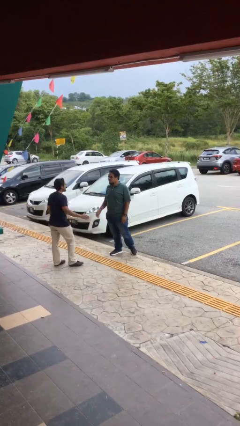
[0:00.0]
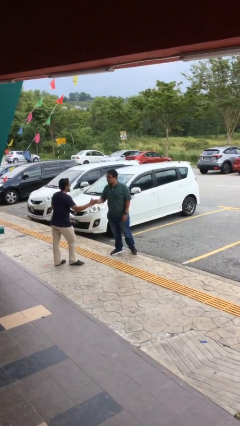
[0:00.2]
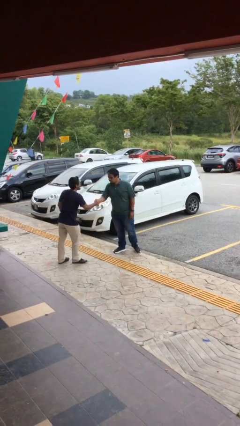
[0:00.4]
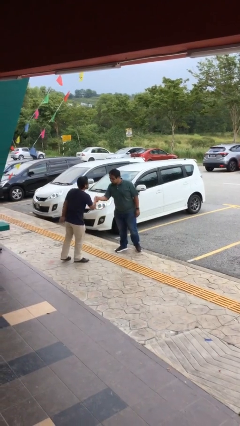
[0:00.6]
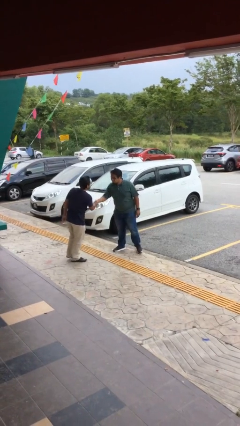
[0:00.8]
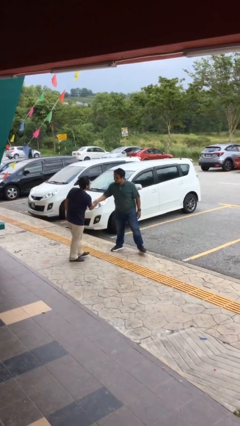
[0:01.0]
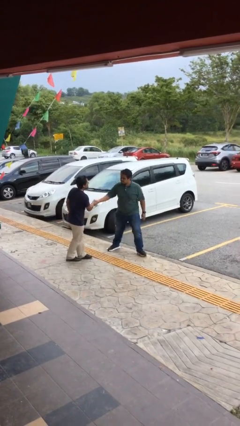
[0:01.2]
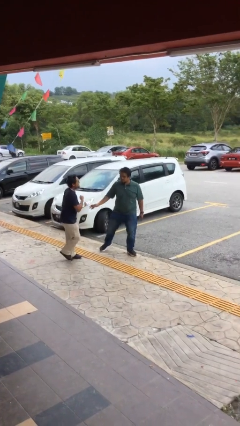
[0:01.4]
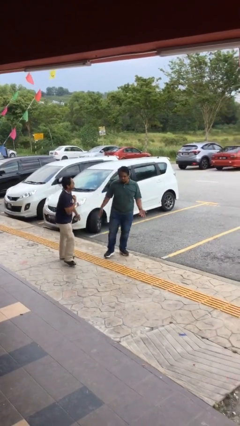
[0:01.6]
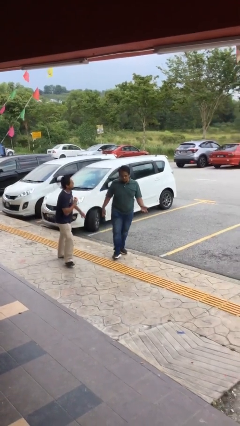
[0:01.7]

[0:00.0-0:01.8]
person shakes hand

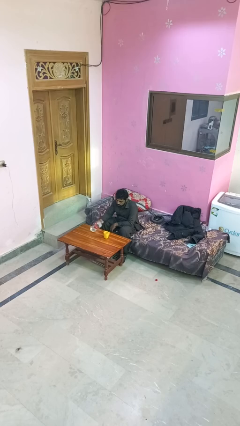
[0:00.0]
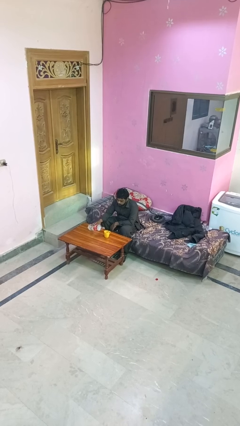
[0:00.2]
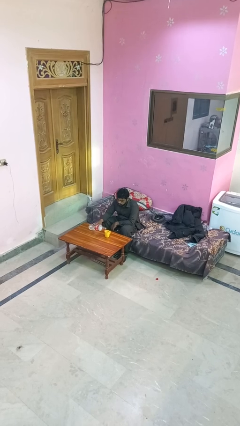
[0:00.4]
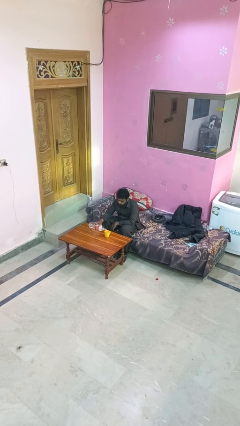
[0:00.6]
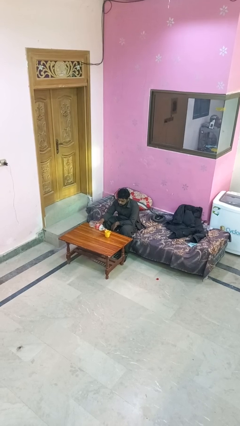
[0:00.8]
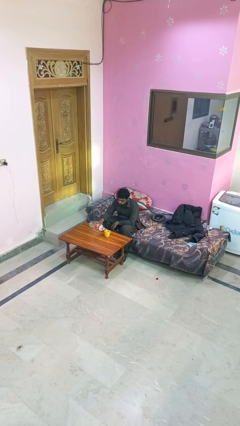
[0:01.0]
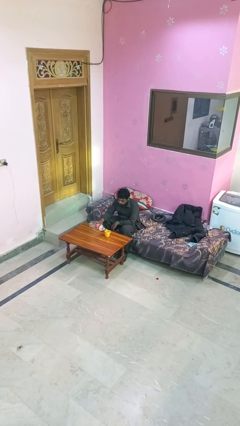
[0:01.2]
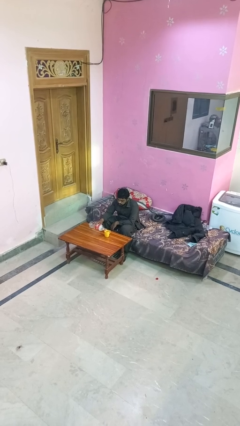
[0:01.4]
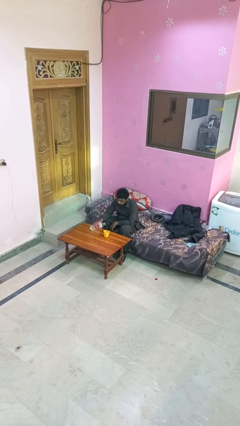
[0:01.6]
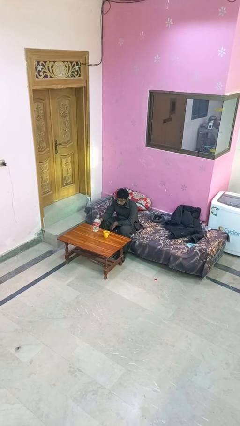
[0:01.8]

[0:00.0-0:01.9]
person pours liquid into cup

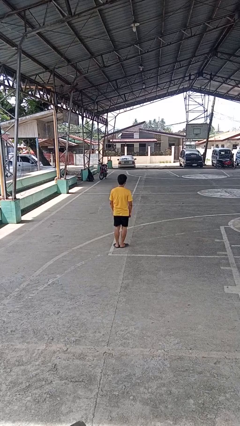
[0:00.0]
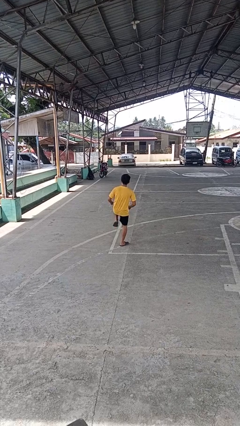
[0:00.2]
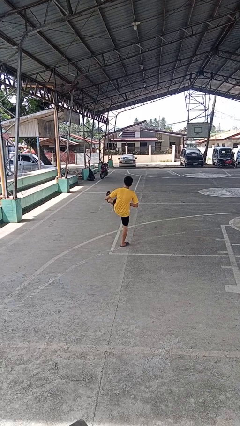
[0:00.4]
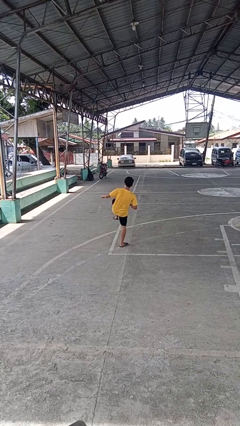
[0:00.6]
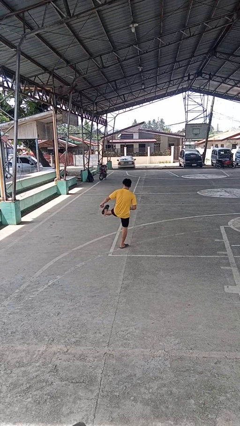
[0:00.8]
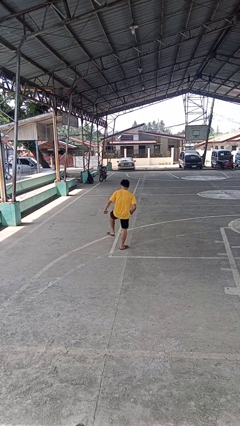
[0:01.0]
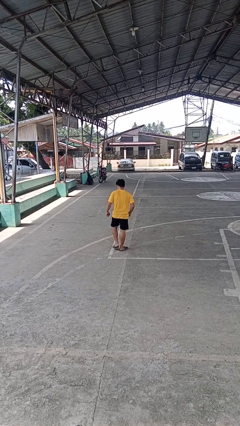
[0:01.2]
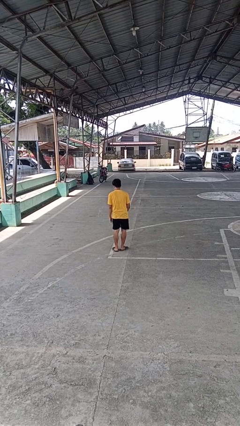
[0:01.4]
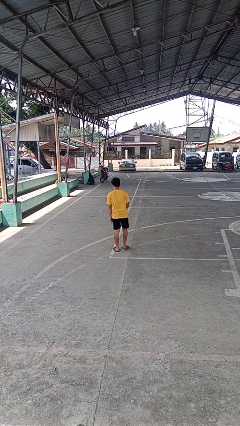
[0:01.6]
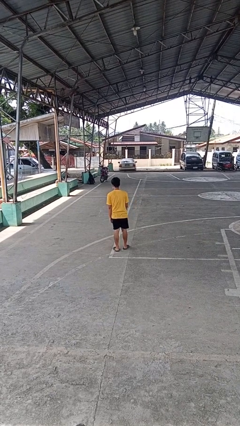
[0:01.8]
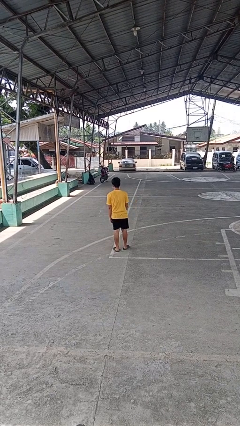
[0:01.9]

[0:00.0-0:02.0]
person karate kicks

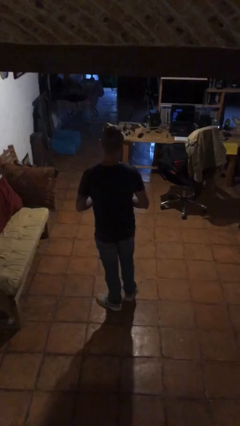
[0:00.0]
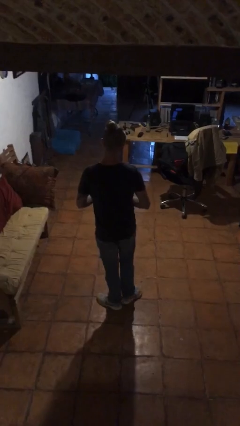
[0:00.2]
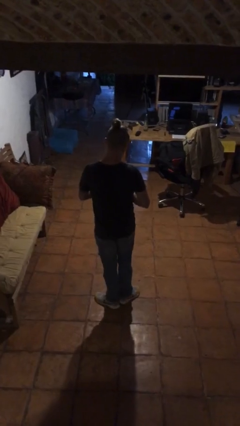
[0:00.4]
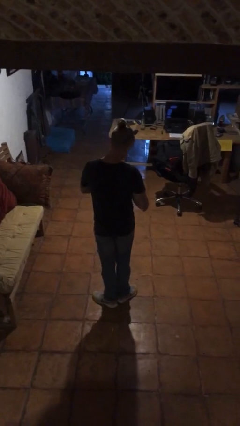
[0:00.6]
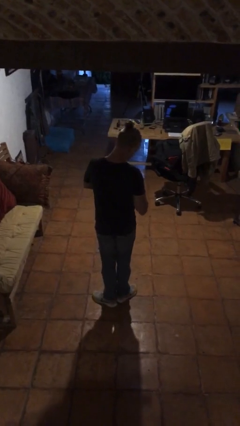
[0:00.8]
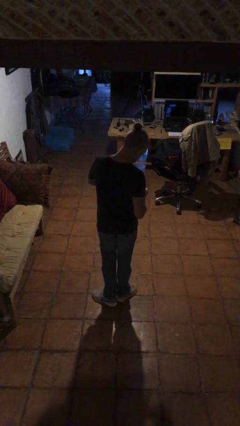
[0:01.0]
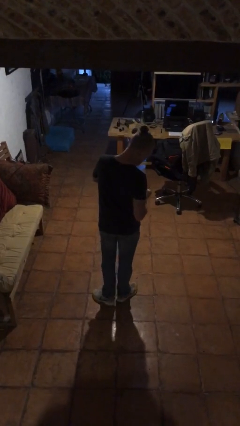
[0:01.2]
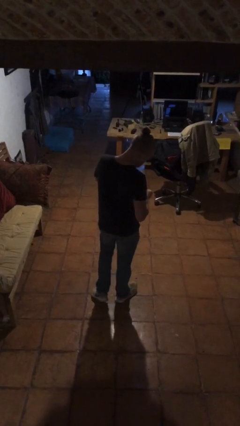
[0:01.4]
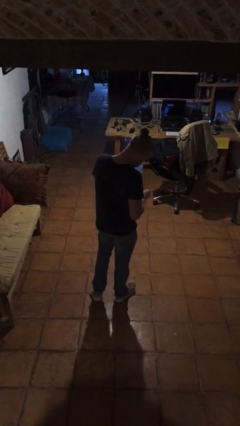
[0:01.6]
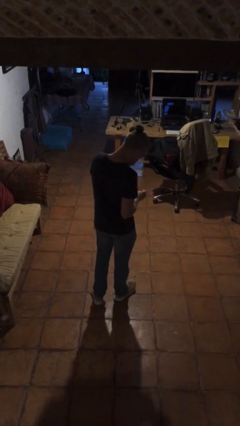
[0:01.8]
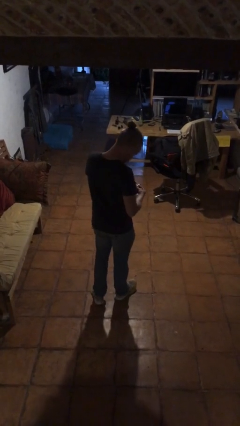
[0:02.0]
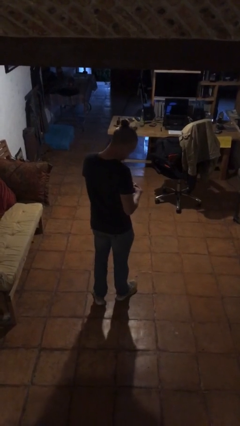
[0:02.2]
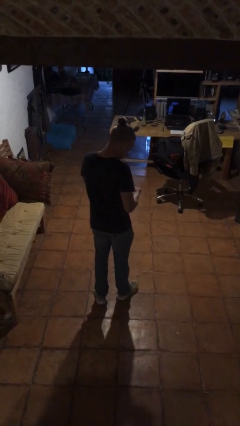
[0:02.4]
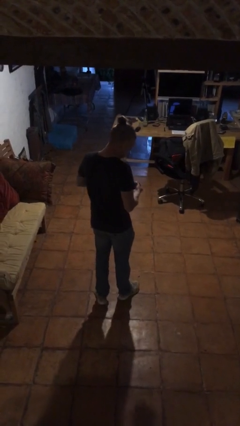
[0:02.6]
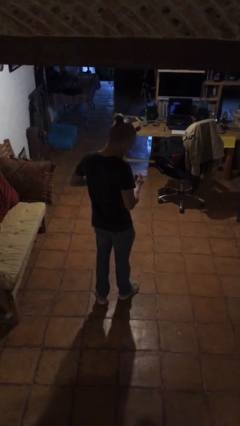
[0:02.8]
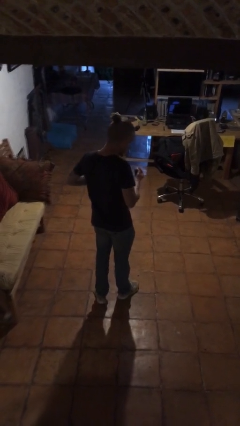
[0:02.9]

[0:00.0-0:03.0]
person takes medicine pills

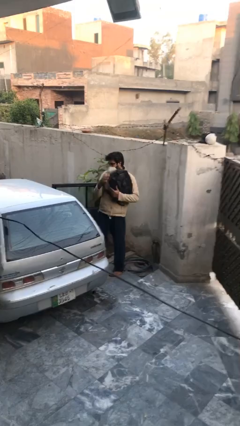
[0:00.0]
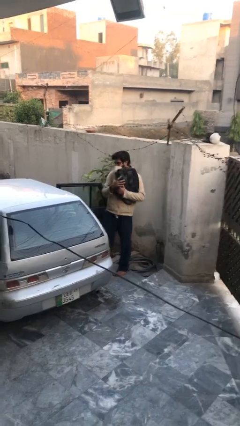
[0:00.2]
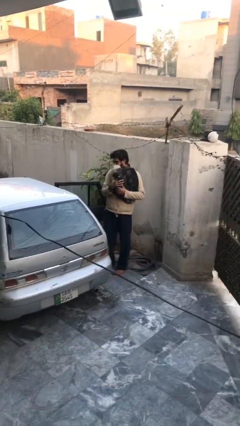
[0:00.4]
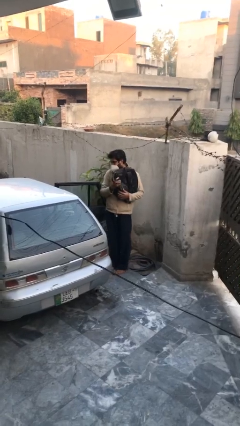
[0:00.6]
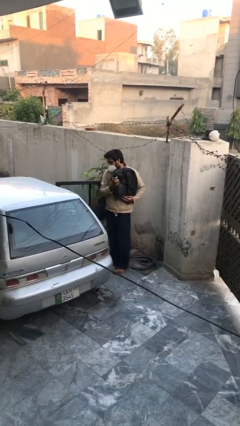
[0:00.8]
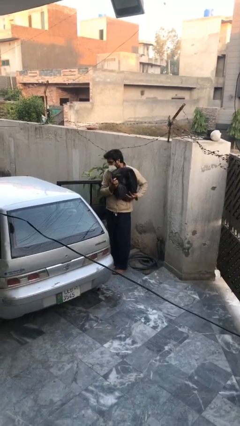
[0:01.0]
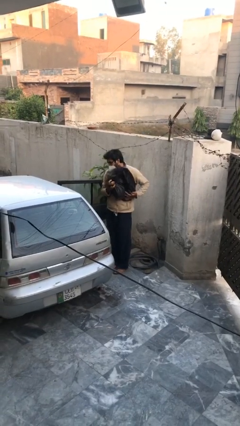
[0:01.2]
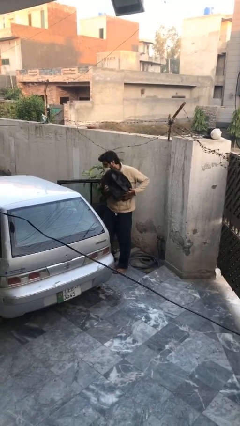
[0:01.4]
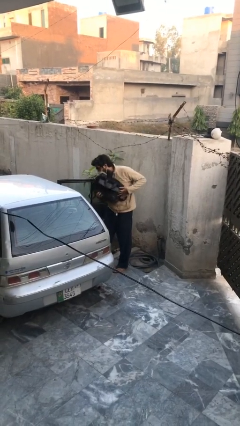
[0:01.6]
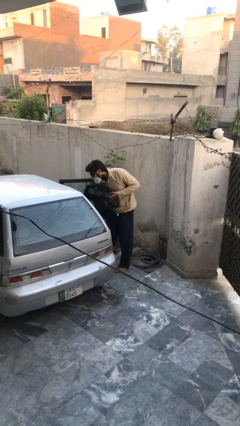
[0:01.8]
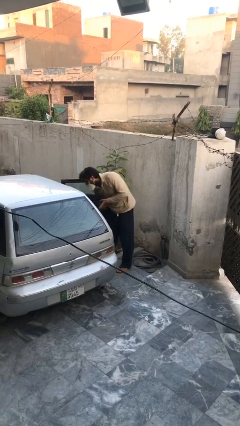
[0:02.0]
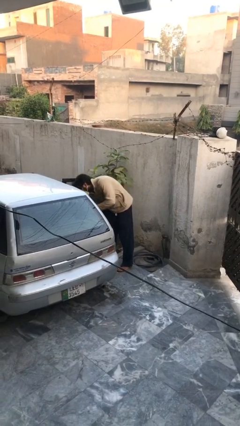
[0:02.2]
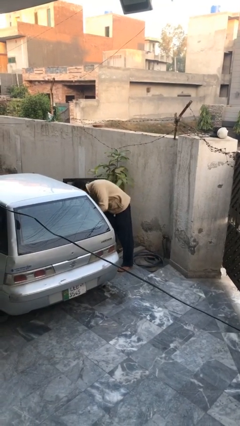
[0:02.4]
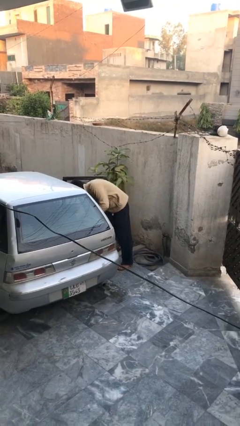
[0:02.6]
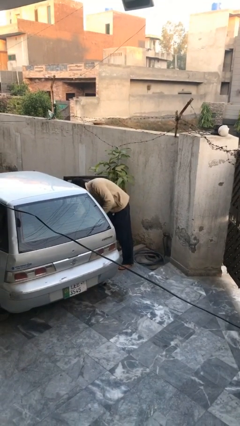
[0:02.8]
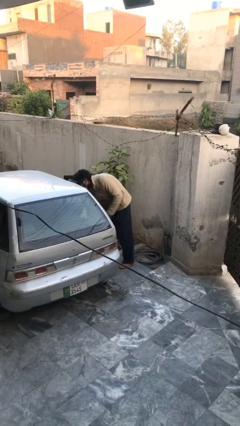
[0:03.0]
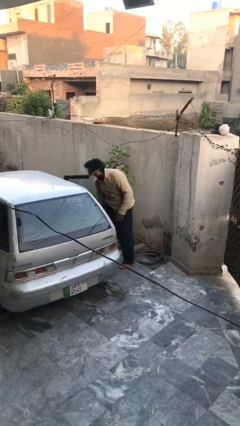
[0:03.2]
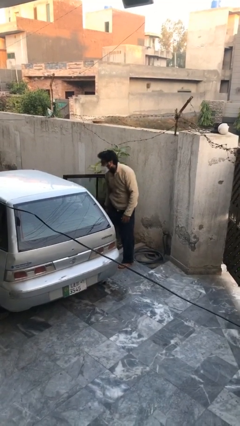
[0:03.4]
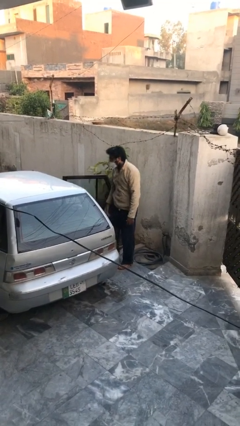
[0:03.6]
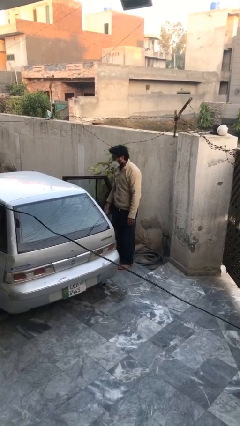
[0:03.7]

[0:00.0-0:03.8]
person loads car

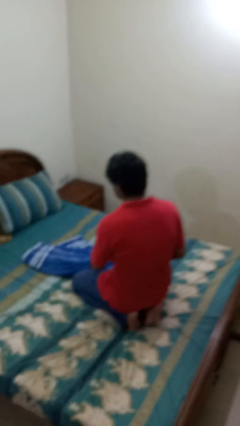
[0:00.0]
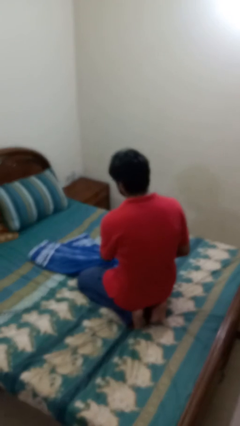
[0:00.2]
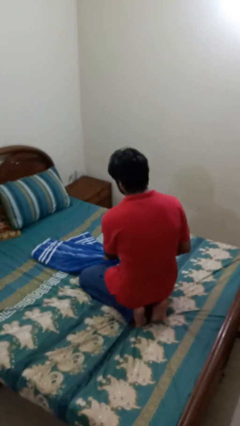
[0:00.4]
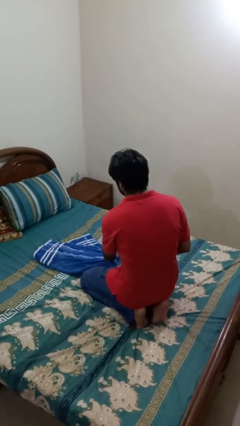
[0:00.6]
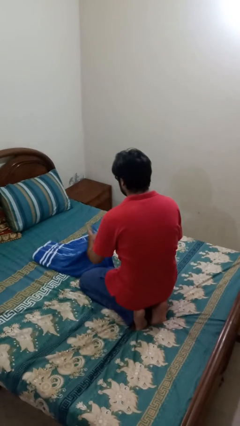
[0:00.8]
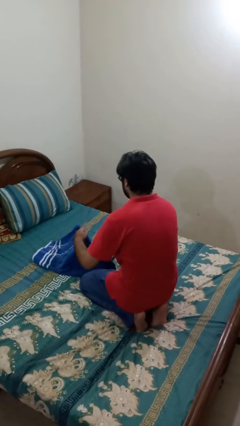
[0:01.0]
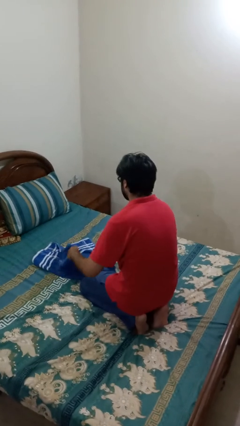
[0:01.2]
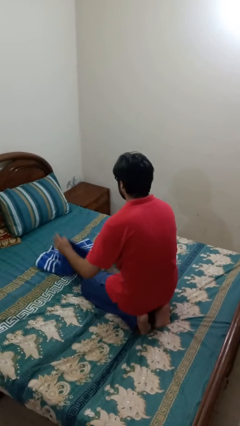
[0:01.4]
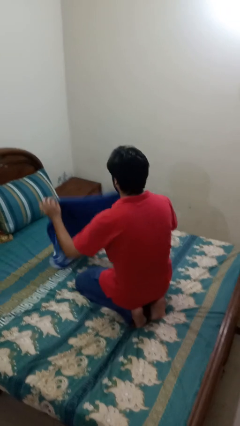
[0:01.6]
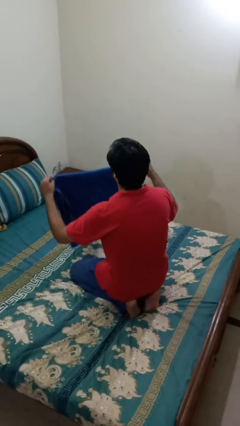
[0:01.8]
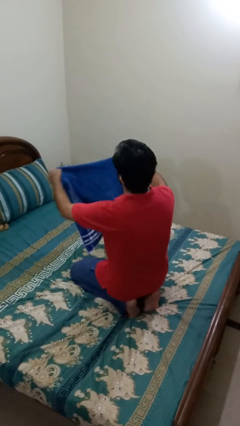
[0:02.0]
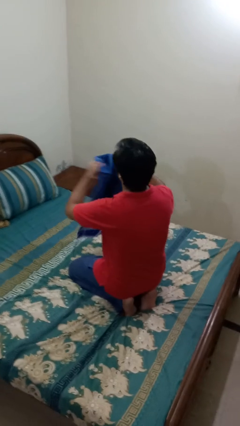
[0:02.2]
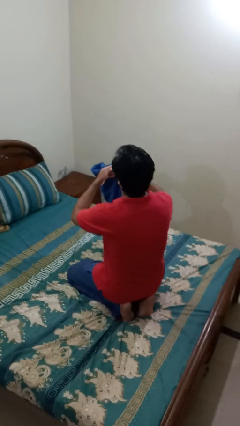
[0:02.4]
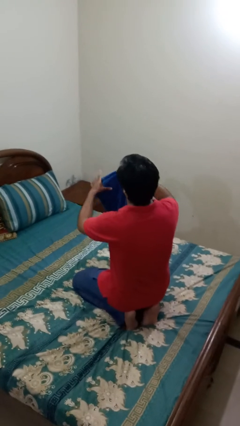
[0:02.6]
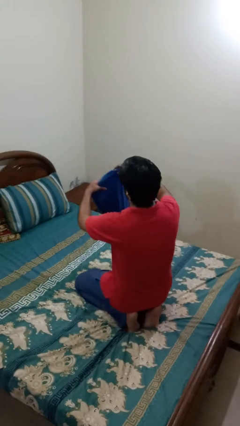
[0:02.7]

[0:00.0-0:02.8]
person folds towel

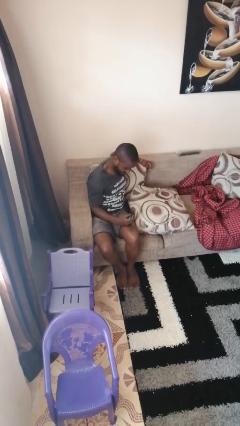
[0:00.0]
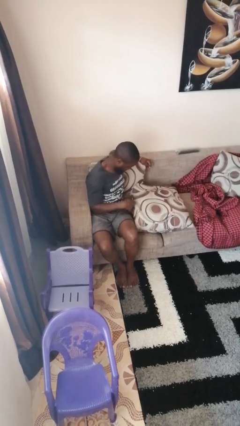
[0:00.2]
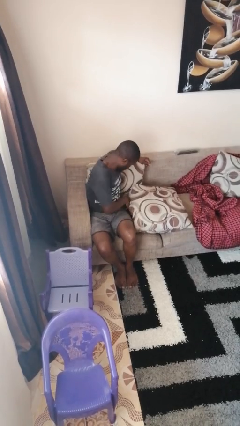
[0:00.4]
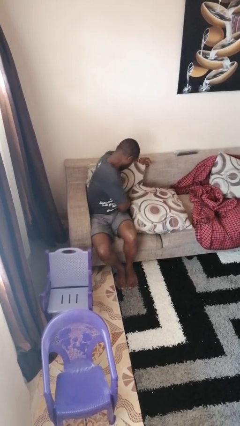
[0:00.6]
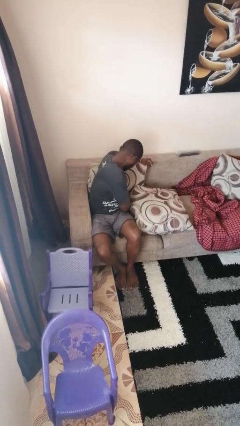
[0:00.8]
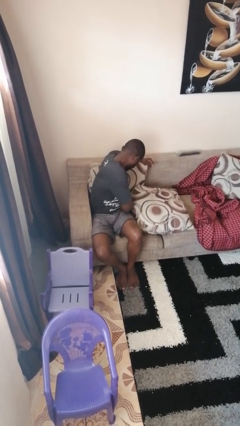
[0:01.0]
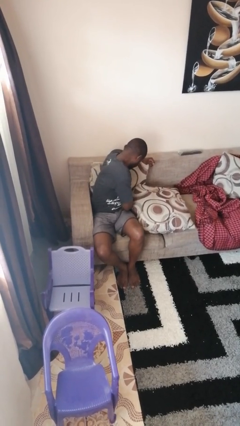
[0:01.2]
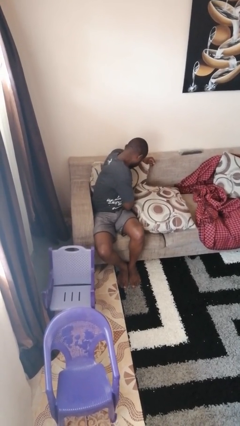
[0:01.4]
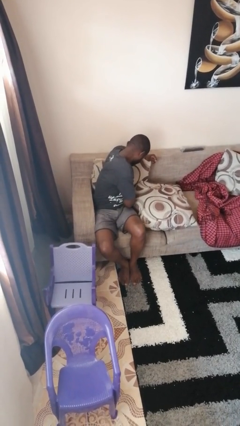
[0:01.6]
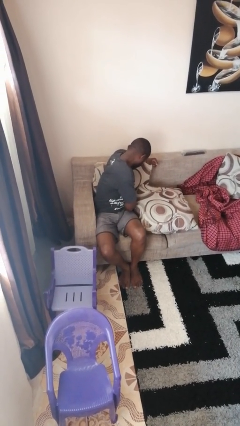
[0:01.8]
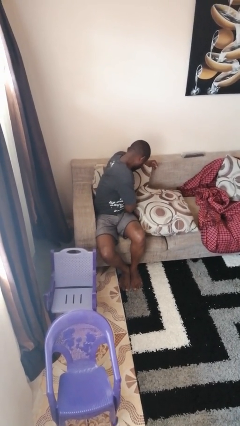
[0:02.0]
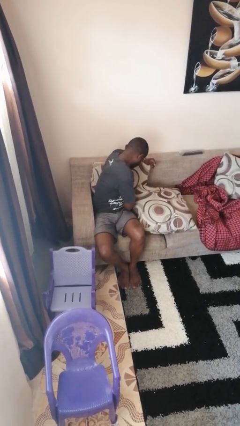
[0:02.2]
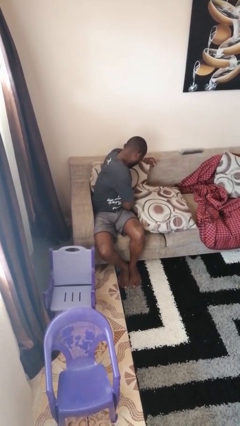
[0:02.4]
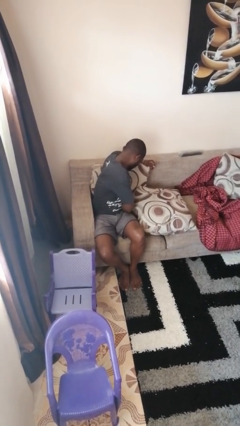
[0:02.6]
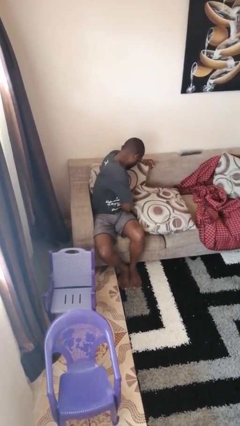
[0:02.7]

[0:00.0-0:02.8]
person searches in couch
